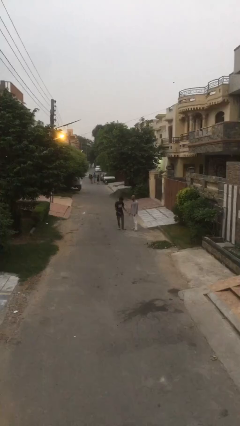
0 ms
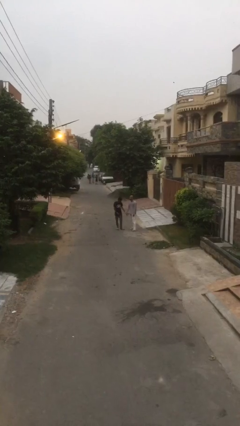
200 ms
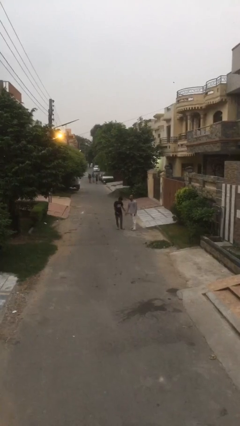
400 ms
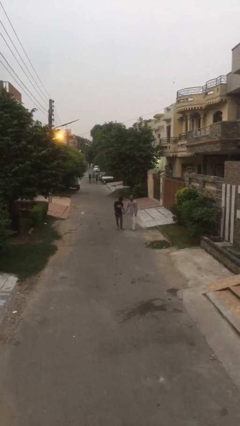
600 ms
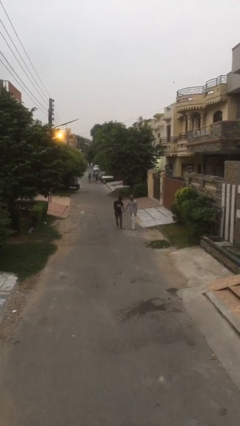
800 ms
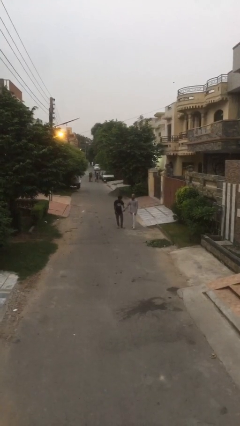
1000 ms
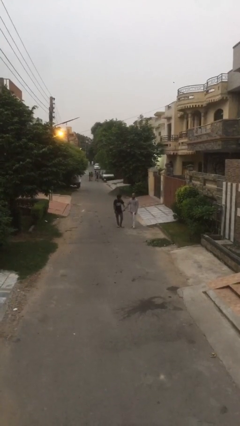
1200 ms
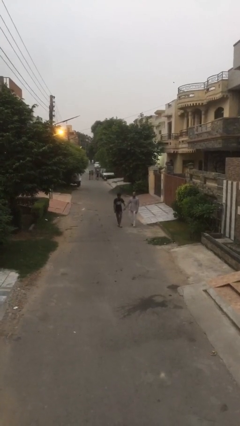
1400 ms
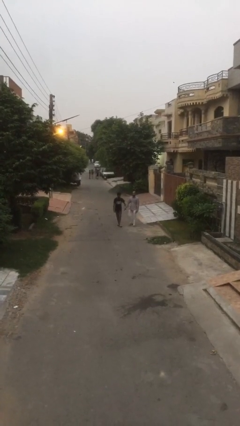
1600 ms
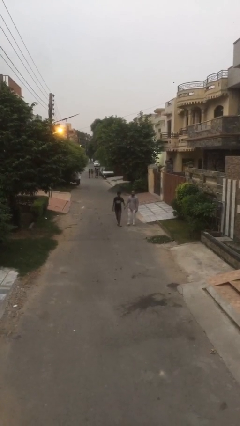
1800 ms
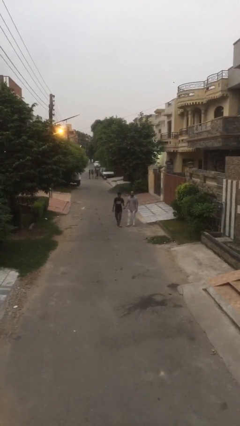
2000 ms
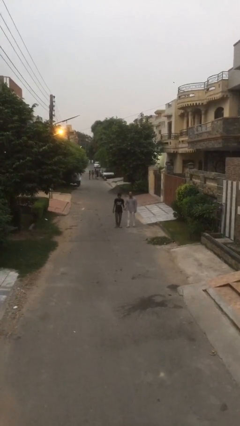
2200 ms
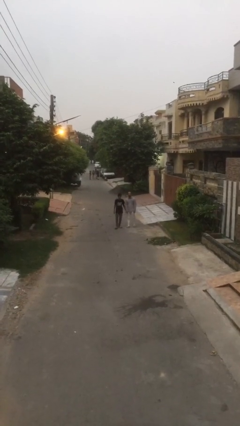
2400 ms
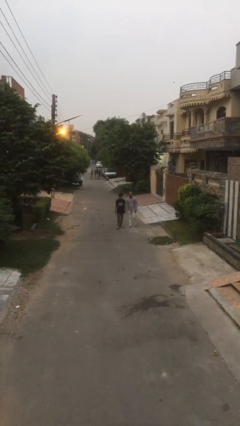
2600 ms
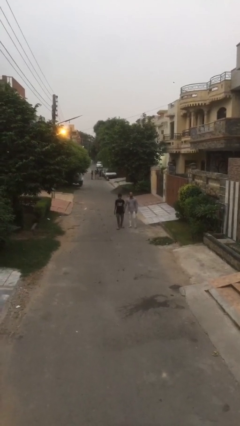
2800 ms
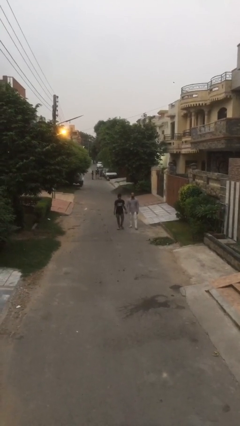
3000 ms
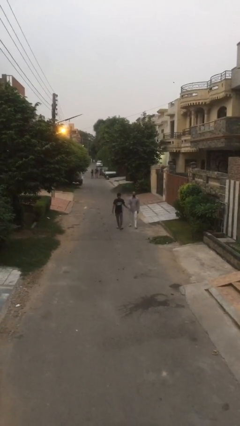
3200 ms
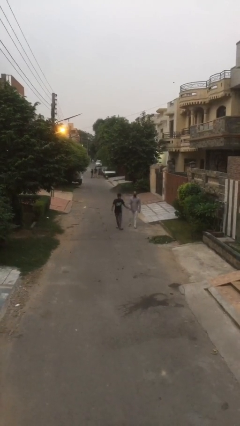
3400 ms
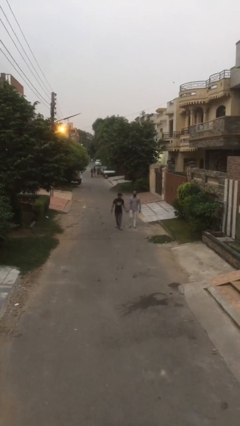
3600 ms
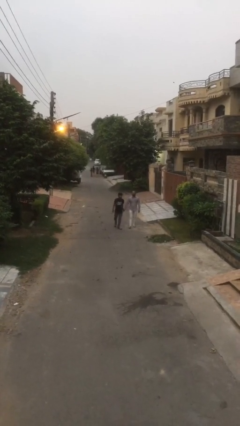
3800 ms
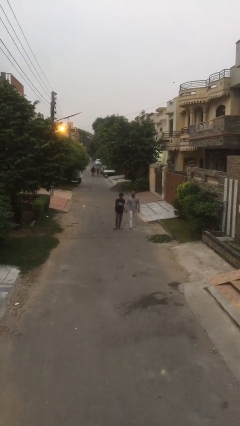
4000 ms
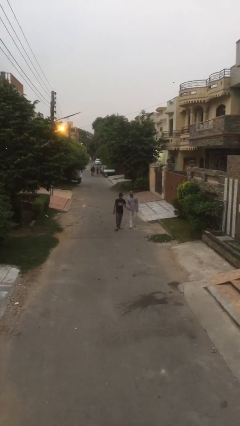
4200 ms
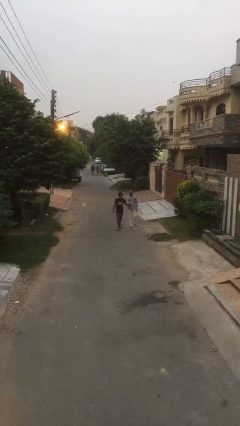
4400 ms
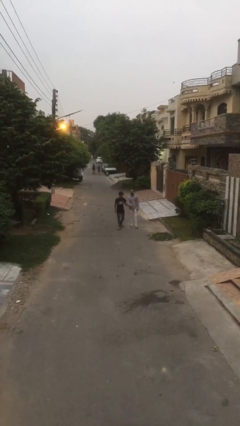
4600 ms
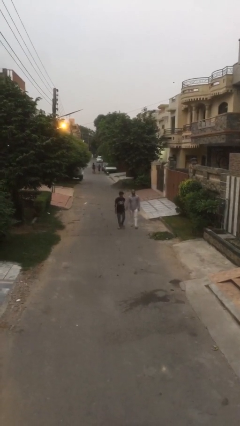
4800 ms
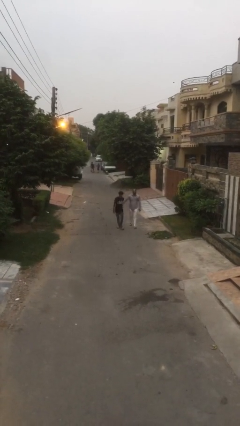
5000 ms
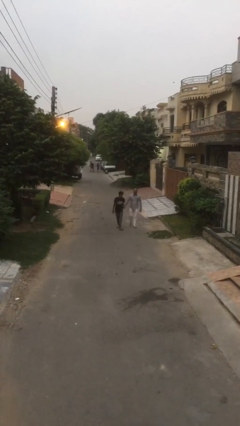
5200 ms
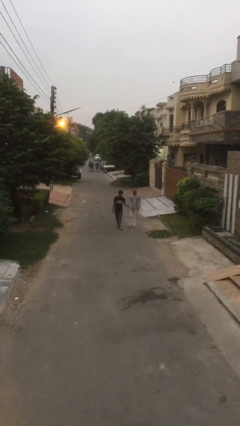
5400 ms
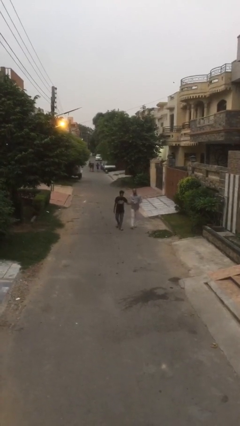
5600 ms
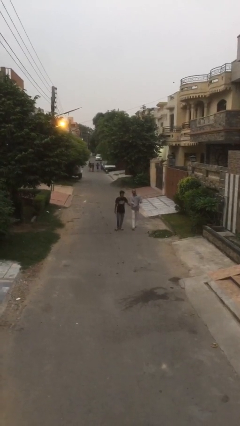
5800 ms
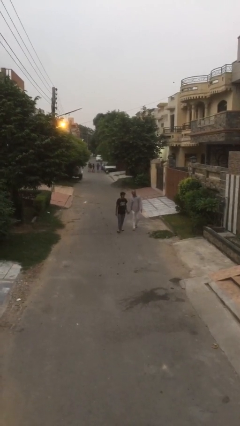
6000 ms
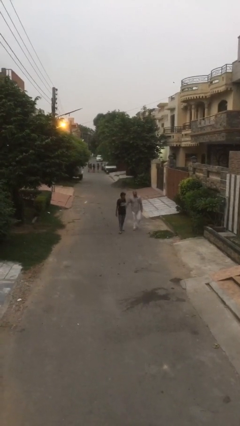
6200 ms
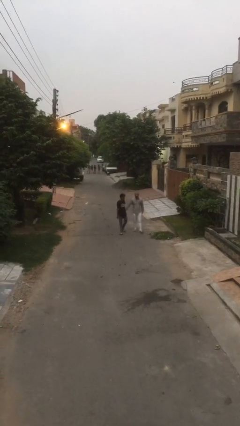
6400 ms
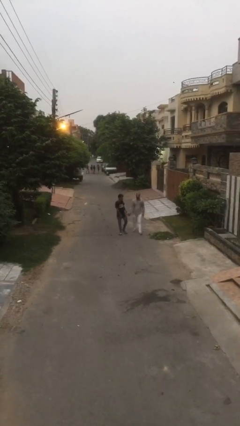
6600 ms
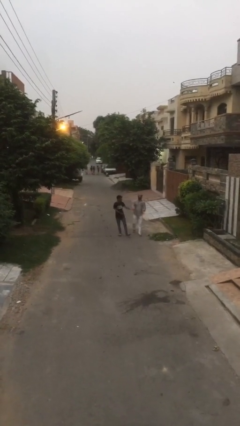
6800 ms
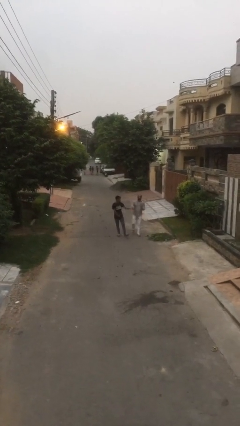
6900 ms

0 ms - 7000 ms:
person holds hand

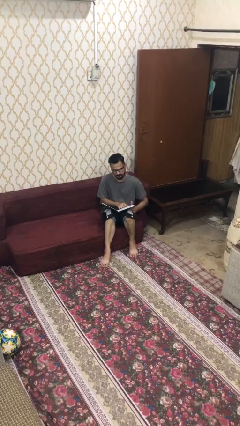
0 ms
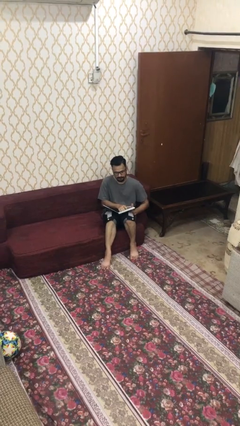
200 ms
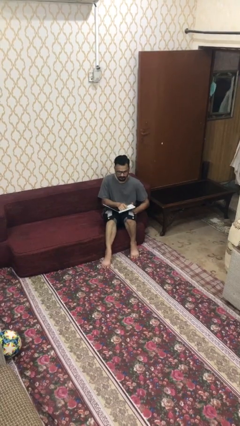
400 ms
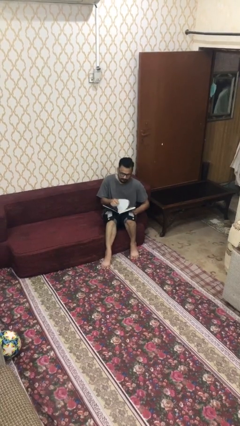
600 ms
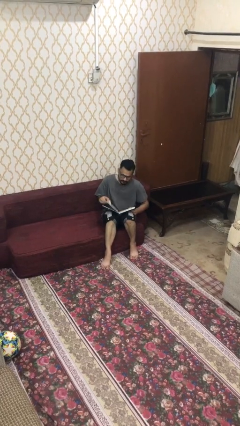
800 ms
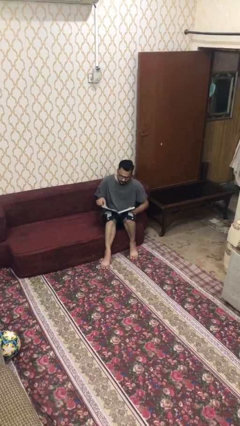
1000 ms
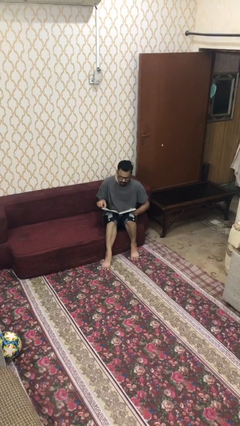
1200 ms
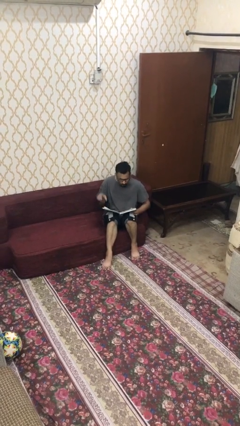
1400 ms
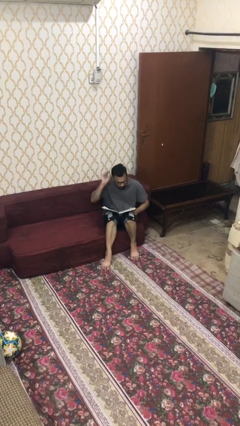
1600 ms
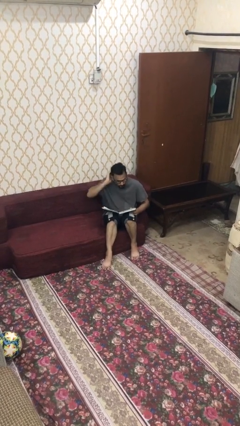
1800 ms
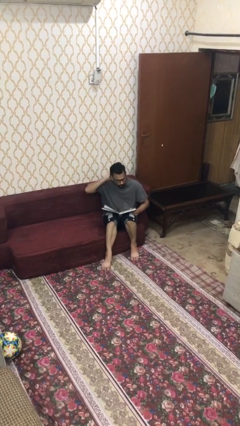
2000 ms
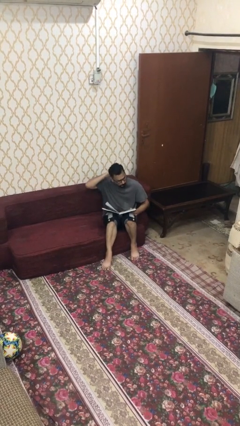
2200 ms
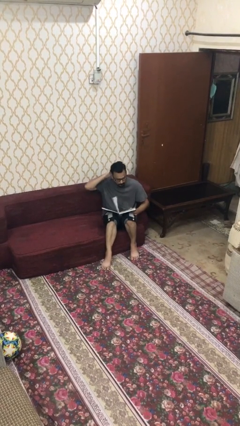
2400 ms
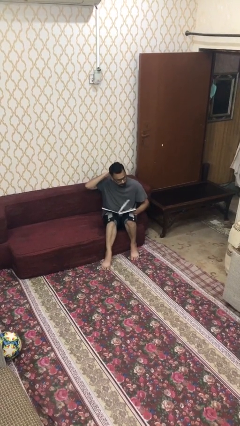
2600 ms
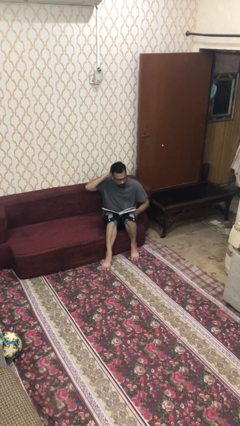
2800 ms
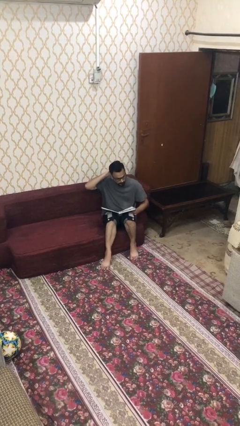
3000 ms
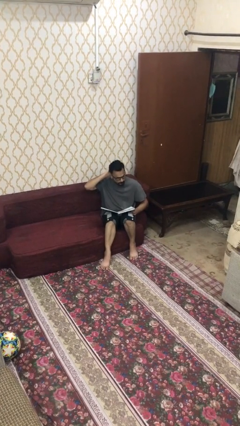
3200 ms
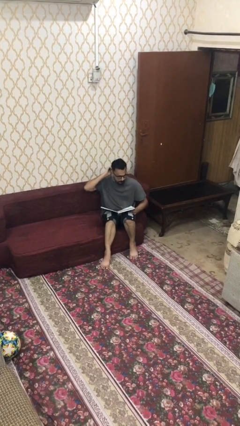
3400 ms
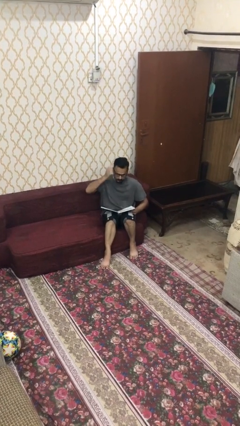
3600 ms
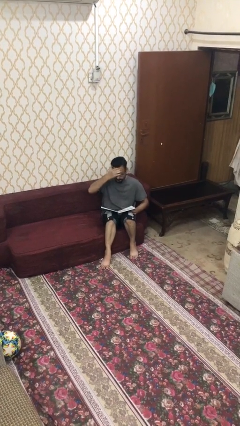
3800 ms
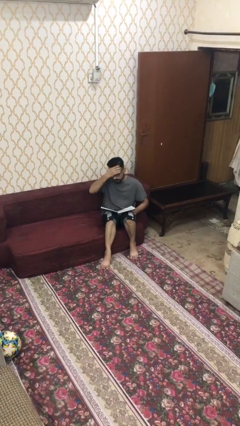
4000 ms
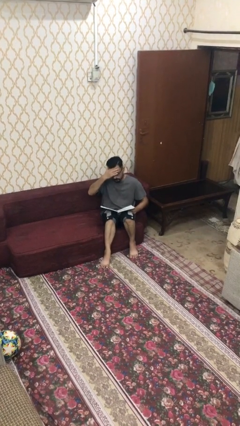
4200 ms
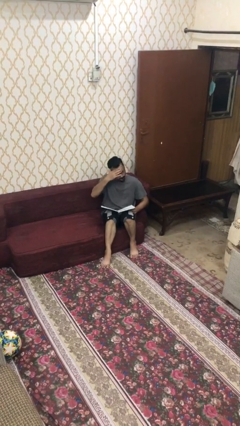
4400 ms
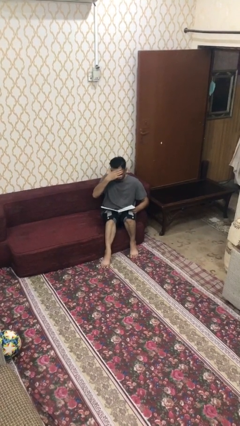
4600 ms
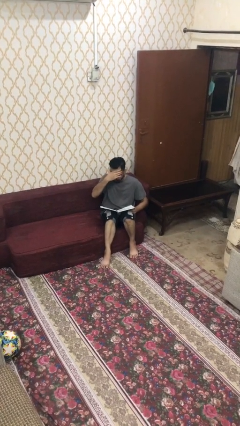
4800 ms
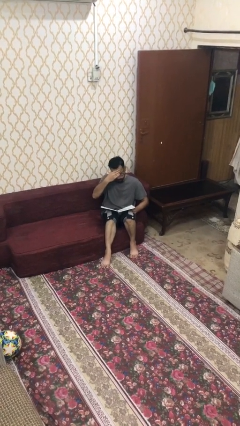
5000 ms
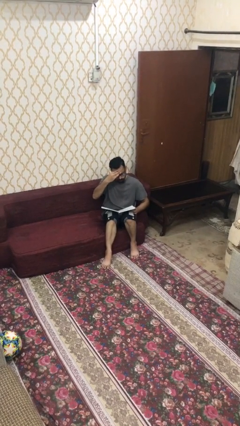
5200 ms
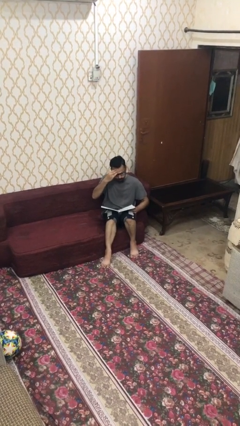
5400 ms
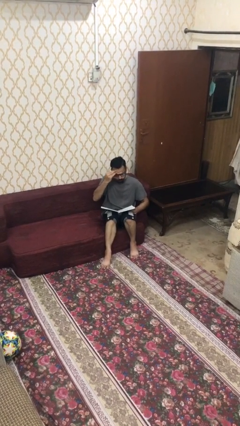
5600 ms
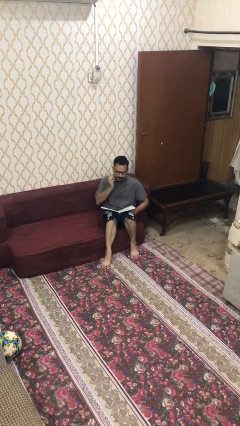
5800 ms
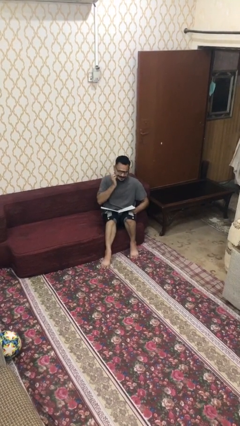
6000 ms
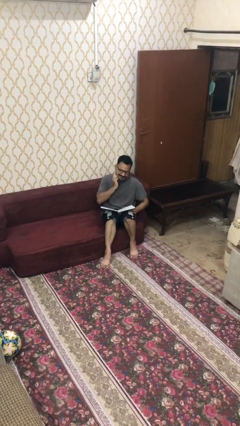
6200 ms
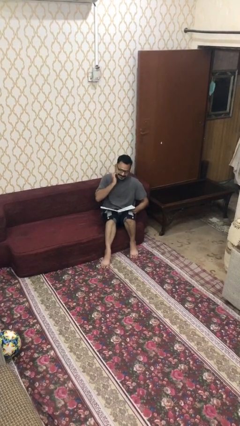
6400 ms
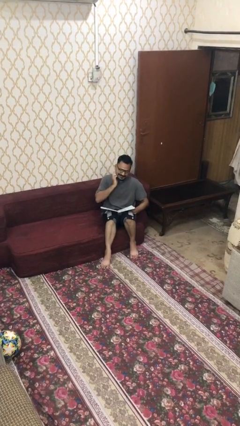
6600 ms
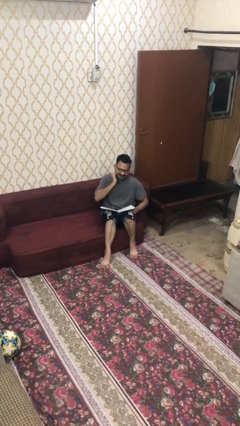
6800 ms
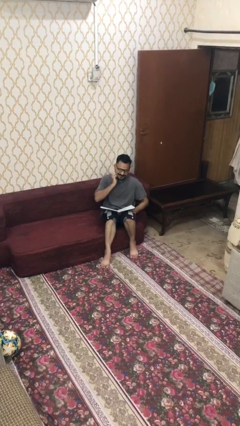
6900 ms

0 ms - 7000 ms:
person reads document

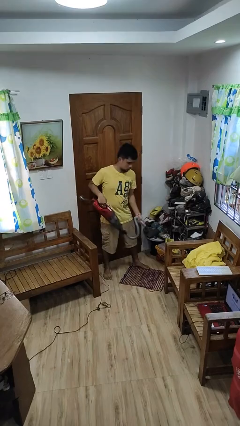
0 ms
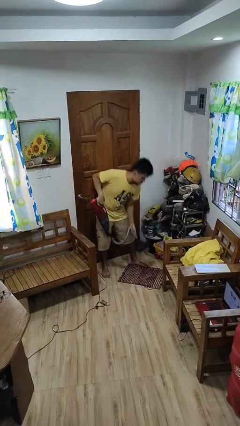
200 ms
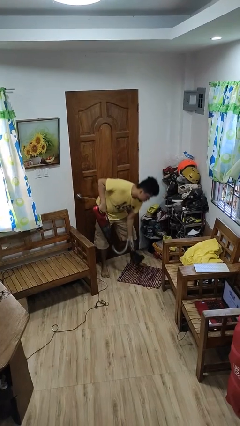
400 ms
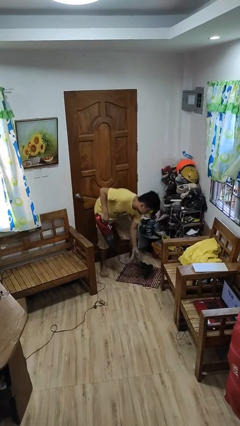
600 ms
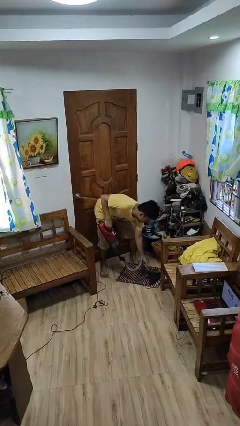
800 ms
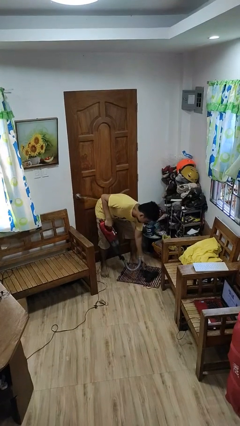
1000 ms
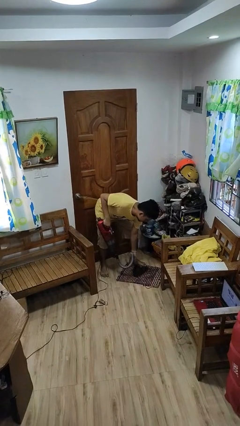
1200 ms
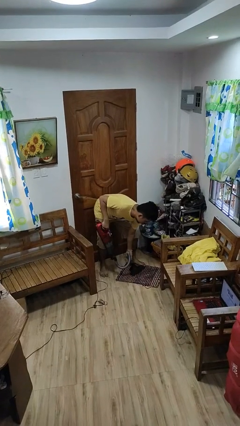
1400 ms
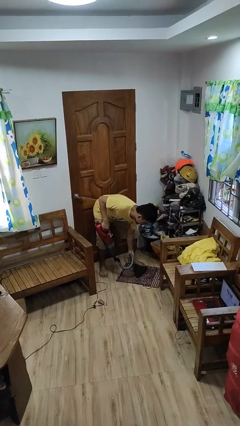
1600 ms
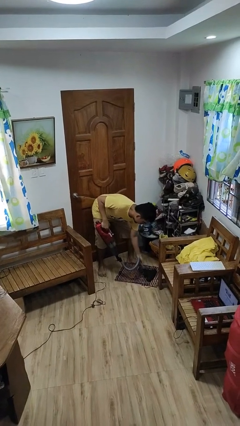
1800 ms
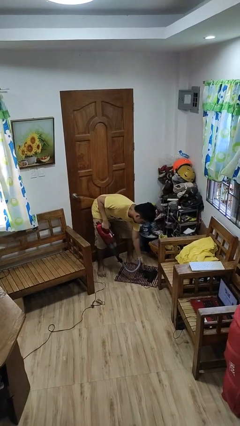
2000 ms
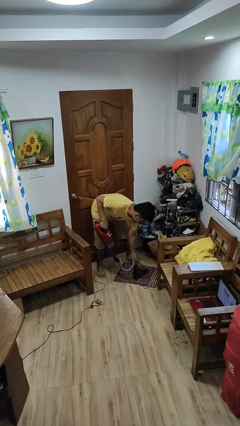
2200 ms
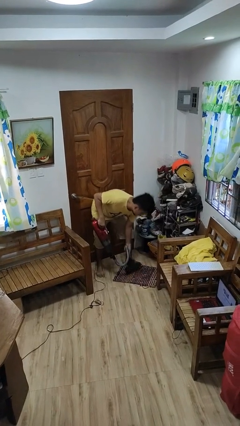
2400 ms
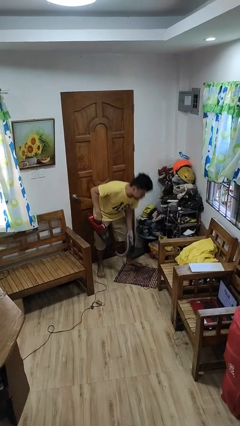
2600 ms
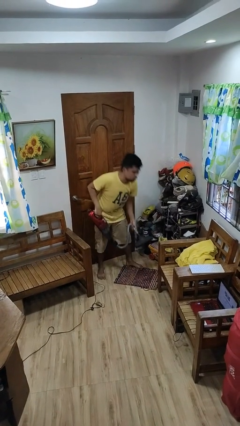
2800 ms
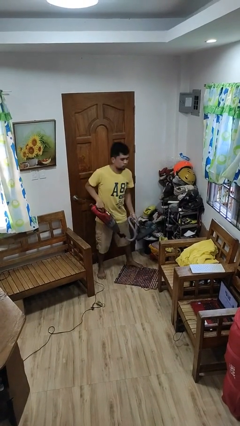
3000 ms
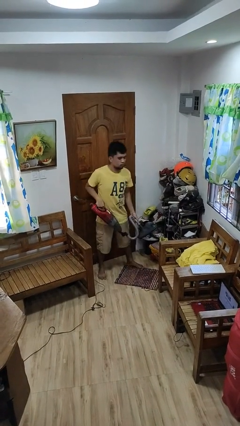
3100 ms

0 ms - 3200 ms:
person vacuums carpet

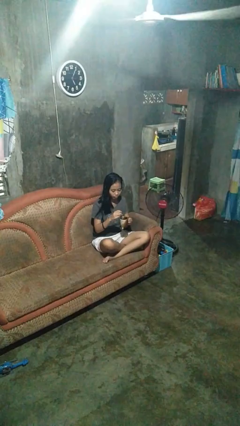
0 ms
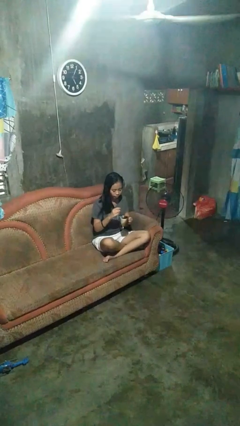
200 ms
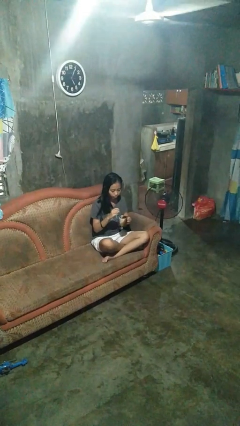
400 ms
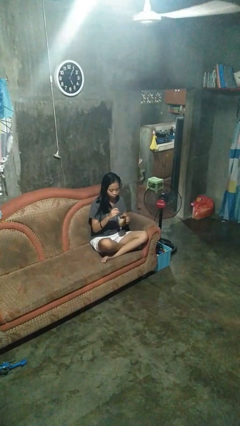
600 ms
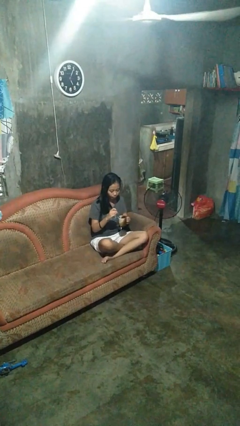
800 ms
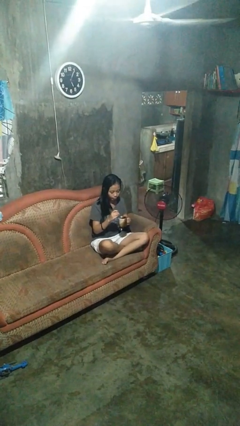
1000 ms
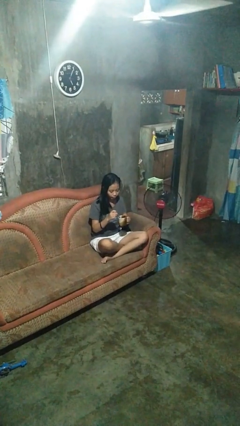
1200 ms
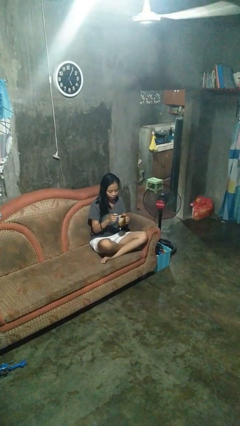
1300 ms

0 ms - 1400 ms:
person stirs mug
